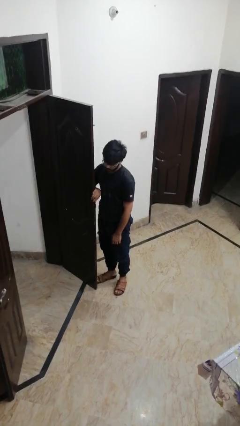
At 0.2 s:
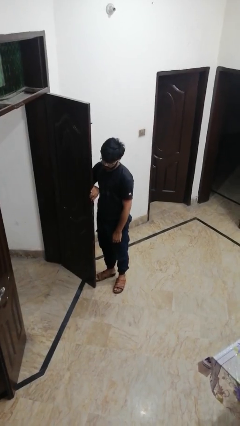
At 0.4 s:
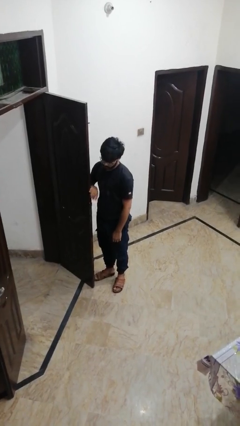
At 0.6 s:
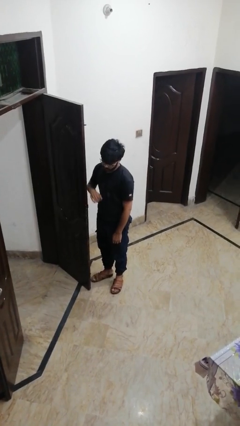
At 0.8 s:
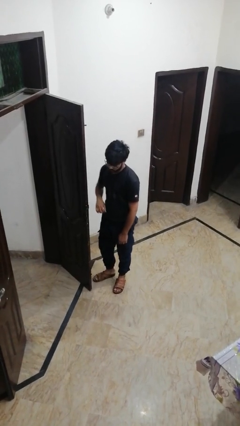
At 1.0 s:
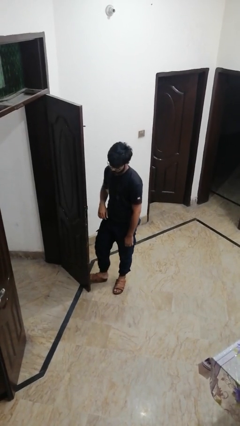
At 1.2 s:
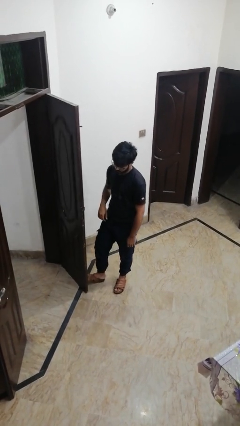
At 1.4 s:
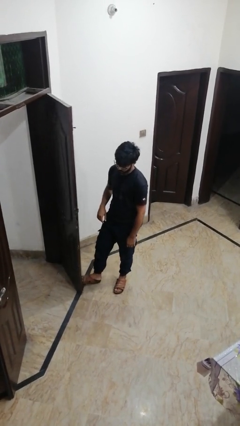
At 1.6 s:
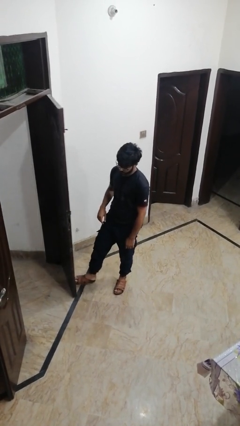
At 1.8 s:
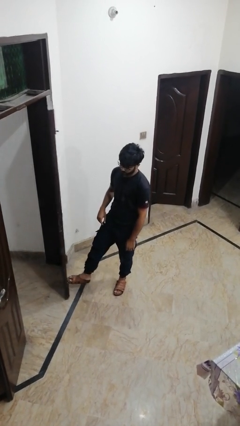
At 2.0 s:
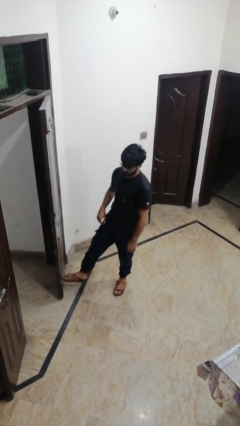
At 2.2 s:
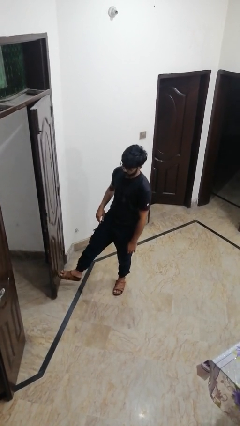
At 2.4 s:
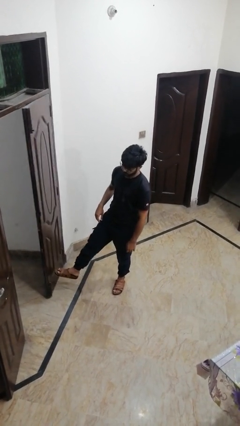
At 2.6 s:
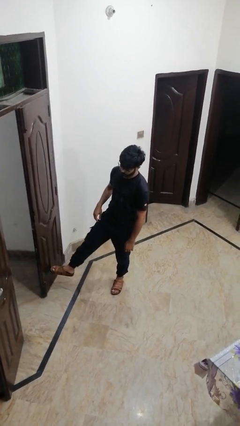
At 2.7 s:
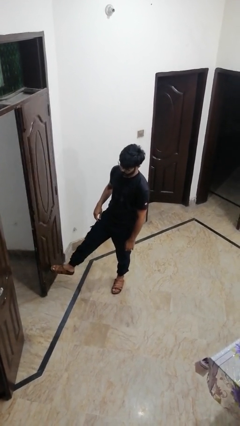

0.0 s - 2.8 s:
person closes door with foot

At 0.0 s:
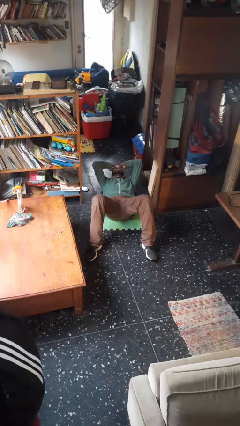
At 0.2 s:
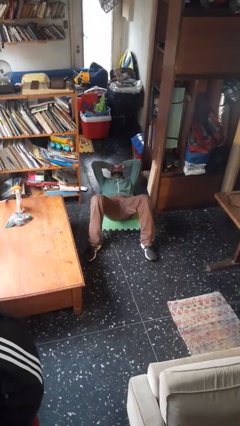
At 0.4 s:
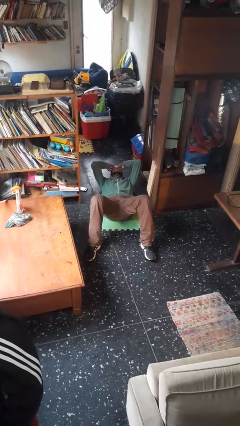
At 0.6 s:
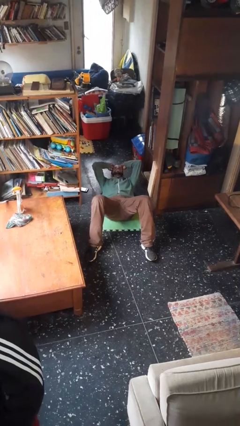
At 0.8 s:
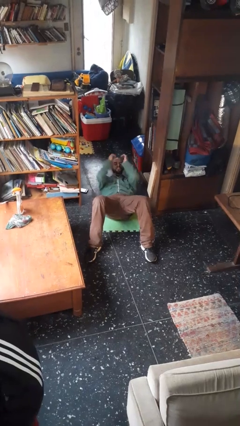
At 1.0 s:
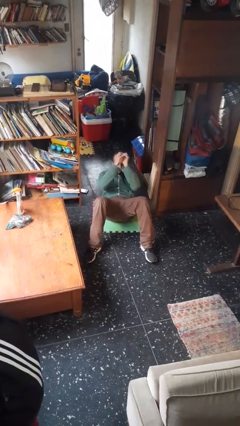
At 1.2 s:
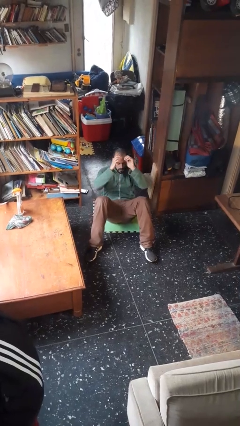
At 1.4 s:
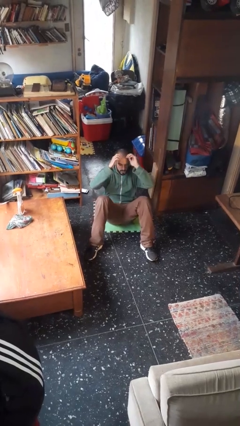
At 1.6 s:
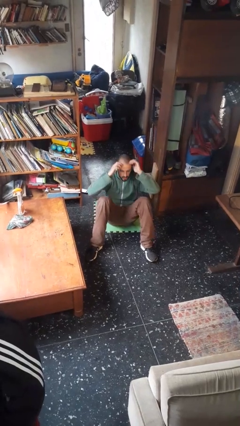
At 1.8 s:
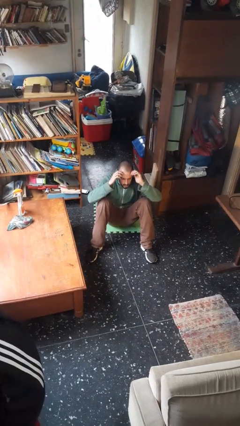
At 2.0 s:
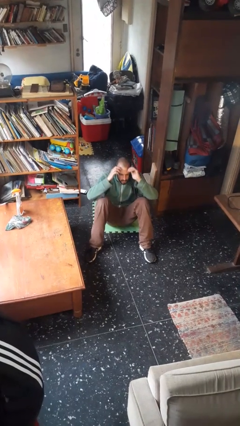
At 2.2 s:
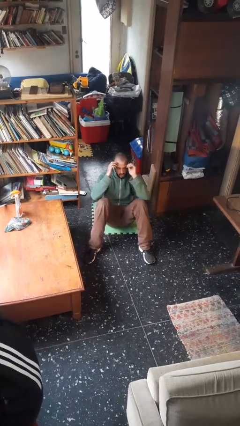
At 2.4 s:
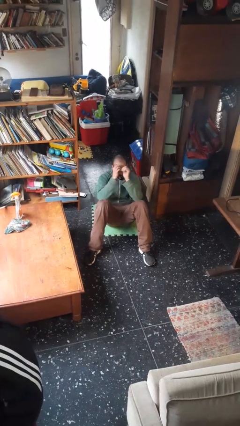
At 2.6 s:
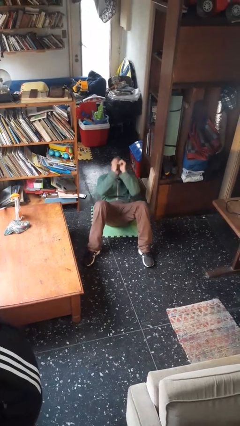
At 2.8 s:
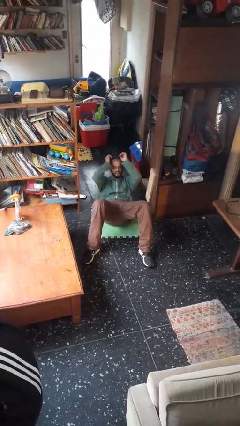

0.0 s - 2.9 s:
person exercises with situp

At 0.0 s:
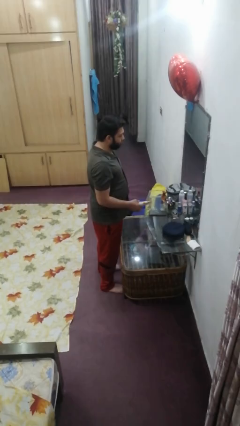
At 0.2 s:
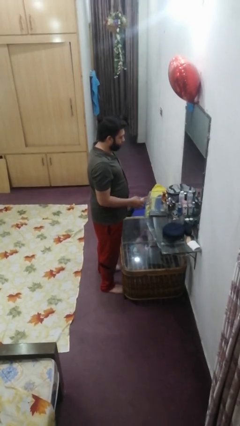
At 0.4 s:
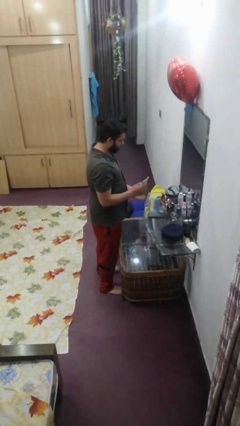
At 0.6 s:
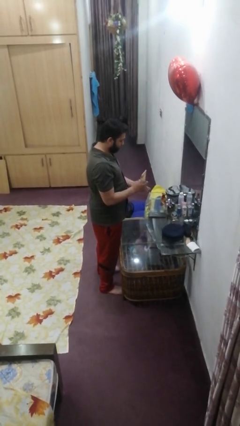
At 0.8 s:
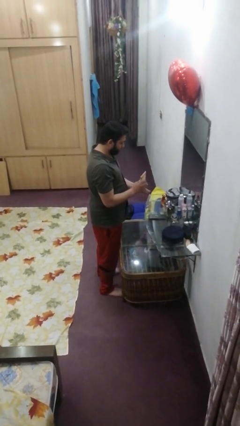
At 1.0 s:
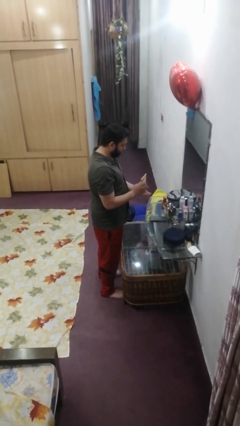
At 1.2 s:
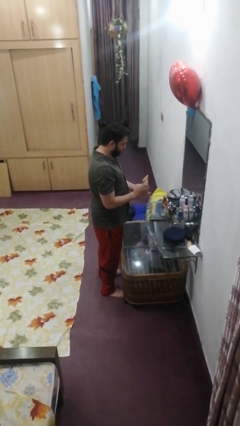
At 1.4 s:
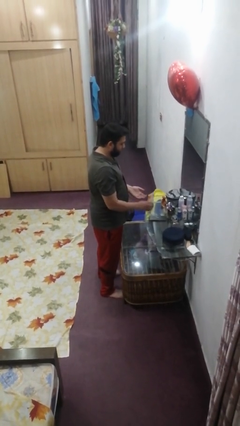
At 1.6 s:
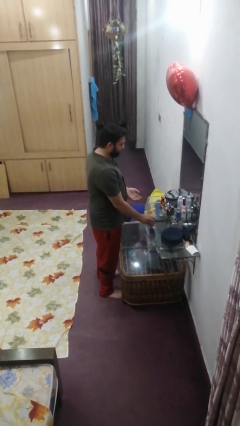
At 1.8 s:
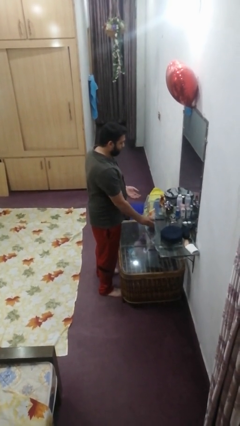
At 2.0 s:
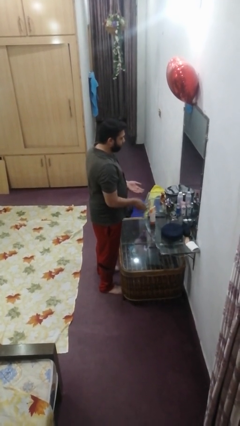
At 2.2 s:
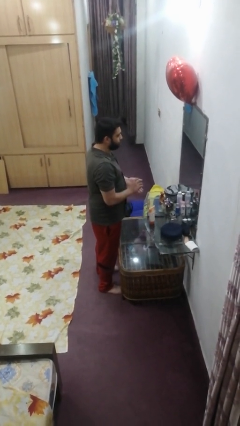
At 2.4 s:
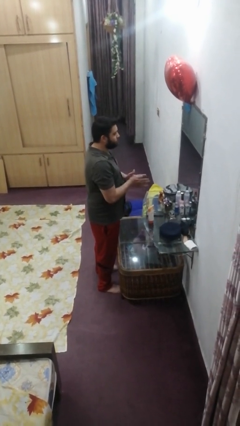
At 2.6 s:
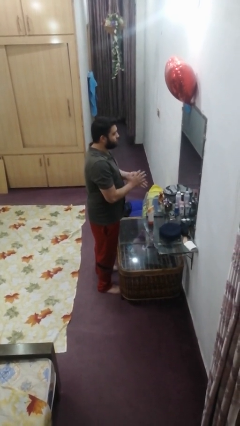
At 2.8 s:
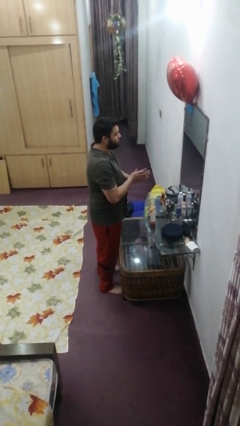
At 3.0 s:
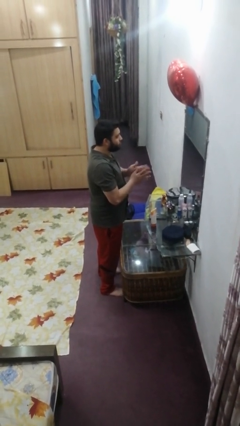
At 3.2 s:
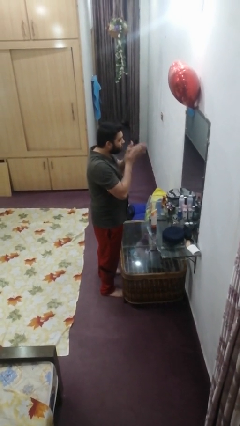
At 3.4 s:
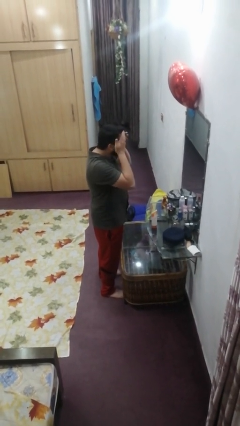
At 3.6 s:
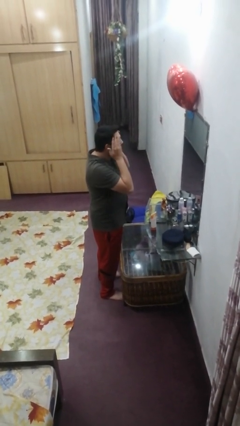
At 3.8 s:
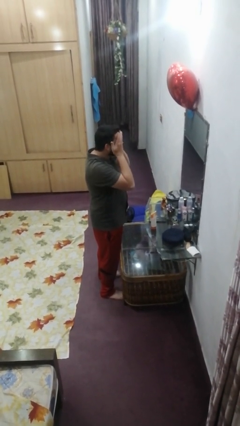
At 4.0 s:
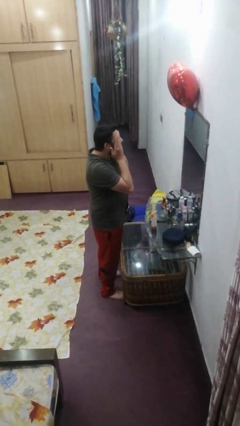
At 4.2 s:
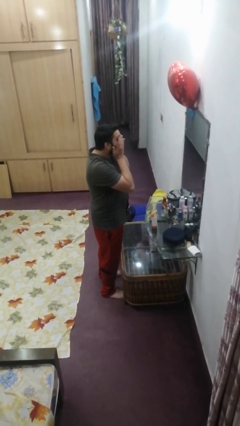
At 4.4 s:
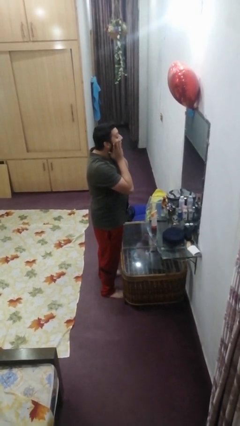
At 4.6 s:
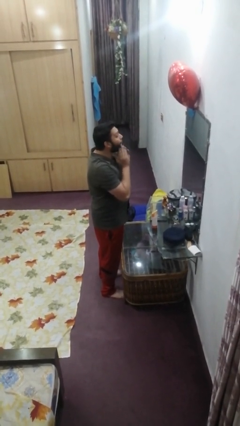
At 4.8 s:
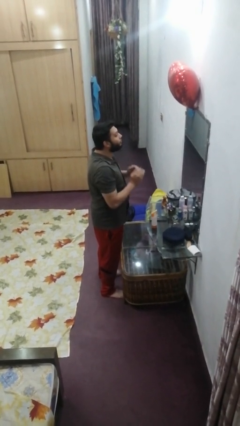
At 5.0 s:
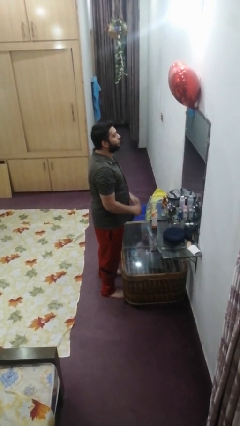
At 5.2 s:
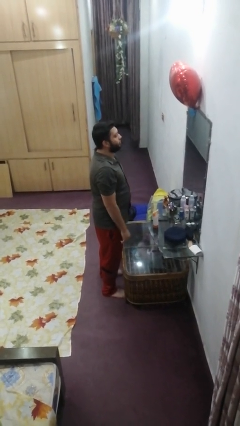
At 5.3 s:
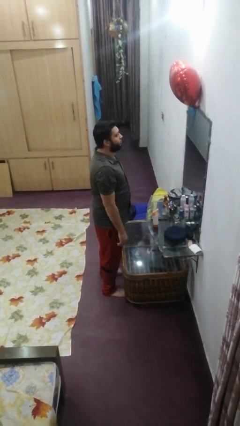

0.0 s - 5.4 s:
person applies facial moisturizer

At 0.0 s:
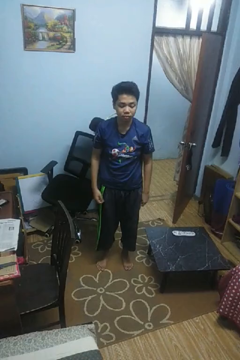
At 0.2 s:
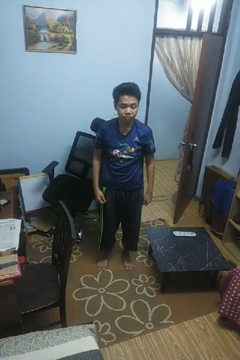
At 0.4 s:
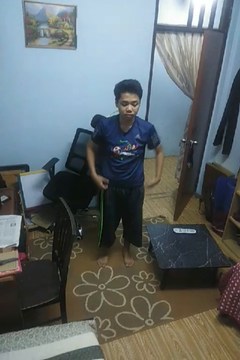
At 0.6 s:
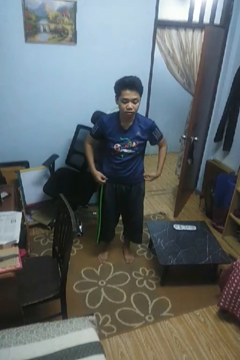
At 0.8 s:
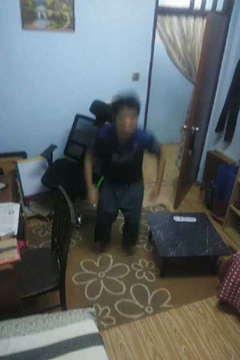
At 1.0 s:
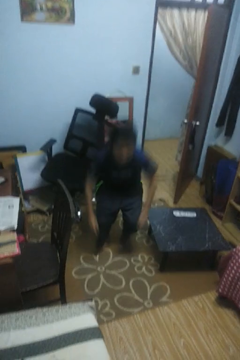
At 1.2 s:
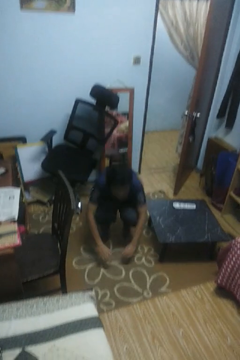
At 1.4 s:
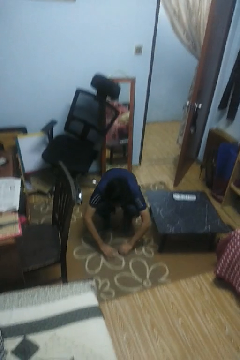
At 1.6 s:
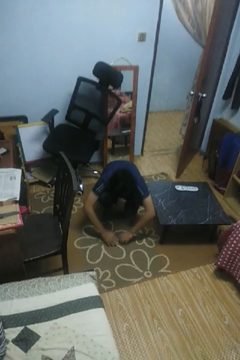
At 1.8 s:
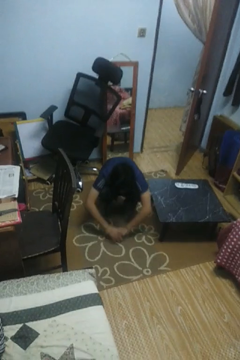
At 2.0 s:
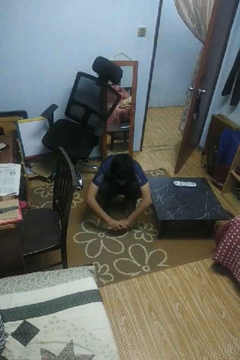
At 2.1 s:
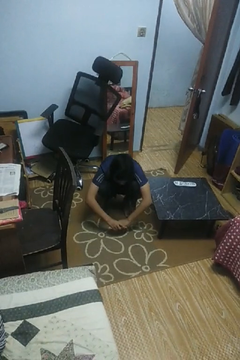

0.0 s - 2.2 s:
person squats

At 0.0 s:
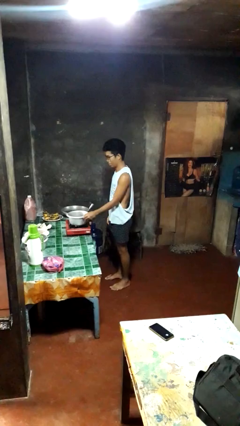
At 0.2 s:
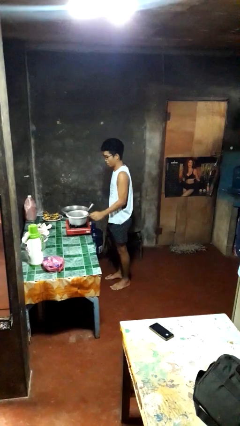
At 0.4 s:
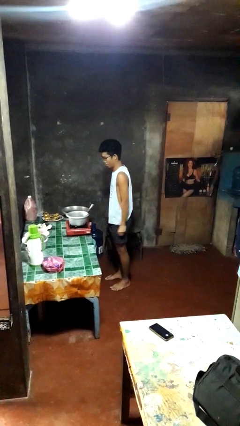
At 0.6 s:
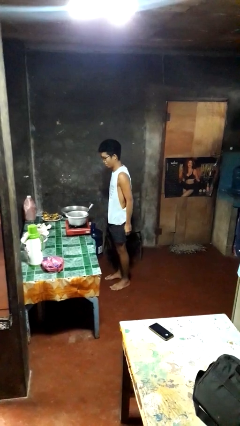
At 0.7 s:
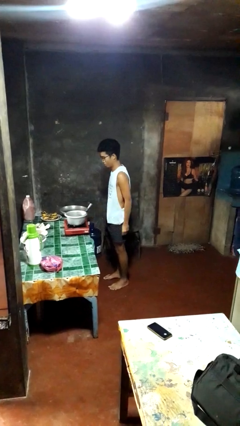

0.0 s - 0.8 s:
person burns hand

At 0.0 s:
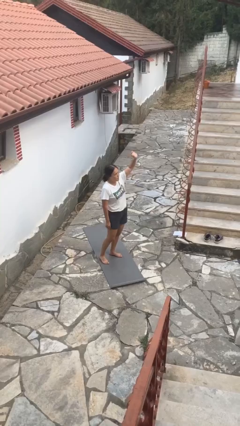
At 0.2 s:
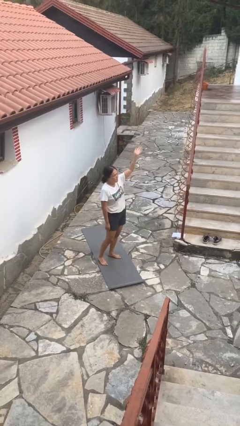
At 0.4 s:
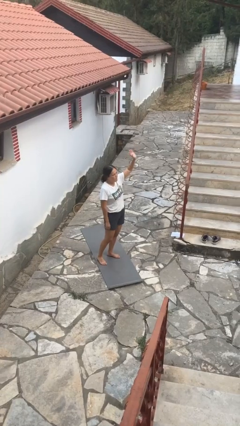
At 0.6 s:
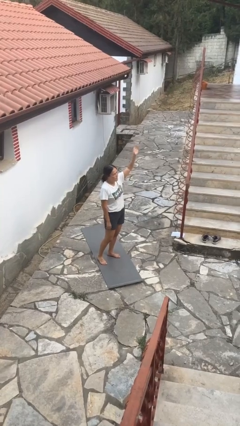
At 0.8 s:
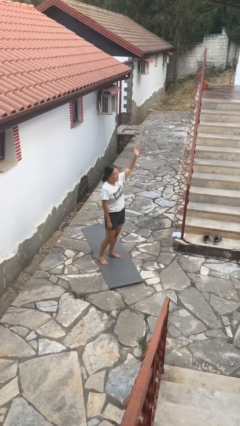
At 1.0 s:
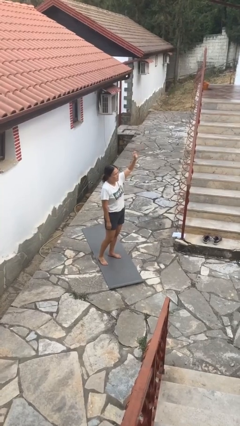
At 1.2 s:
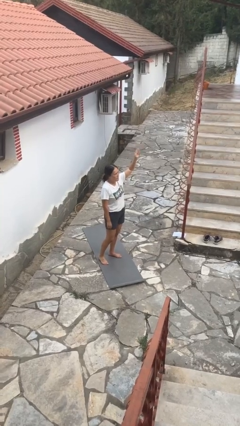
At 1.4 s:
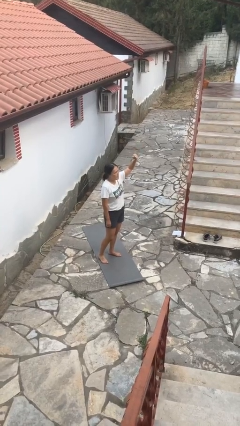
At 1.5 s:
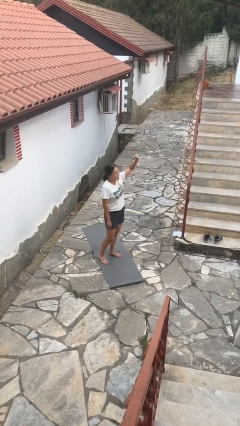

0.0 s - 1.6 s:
person gestures raise hand

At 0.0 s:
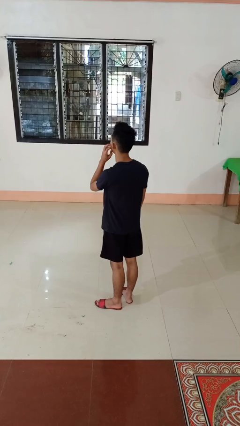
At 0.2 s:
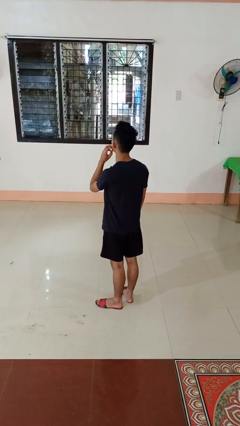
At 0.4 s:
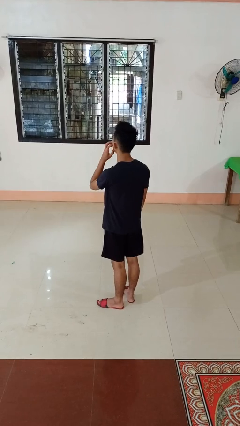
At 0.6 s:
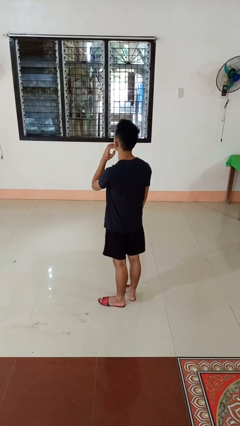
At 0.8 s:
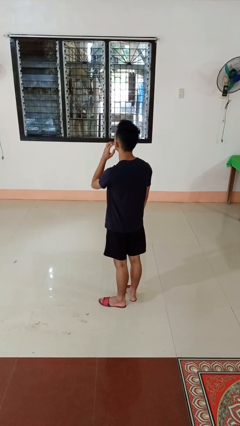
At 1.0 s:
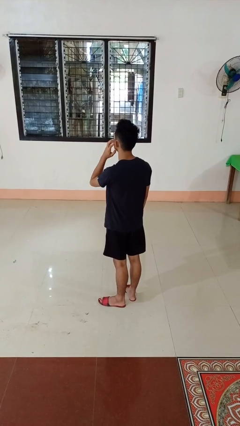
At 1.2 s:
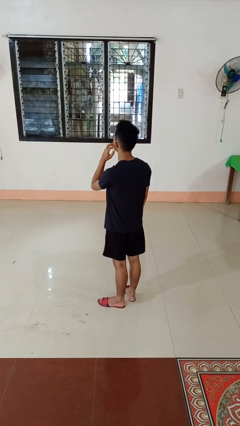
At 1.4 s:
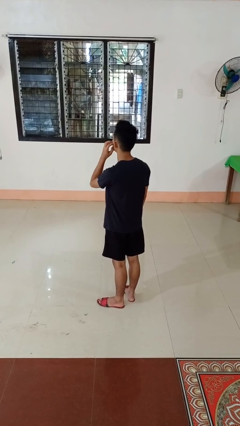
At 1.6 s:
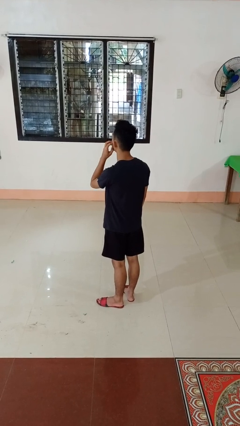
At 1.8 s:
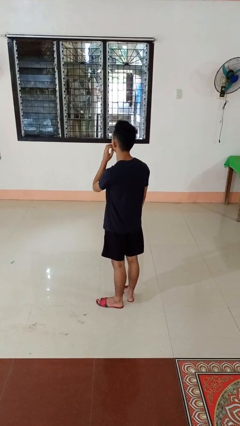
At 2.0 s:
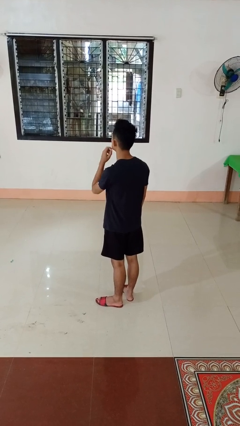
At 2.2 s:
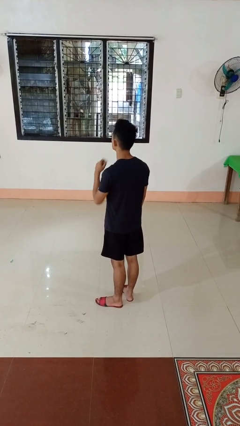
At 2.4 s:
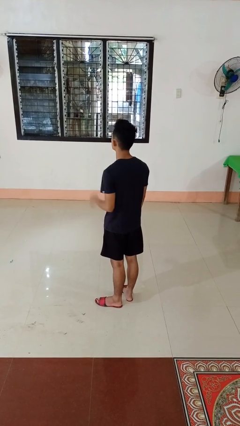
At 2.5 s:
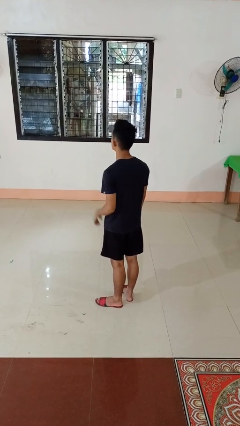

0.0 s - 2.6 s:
person scratches face
